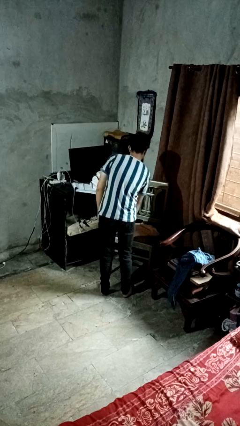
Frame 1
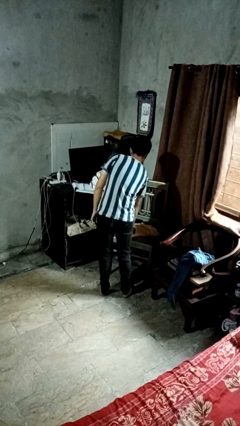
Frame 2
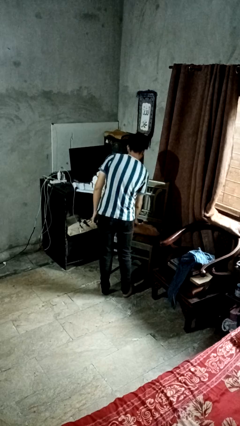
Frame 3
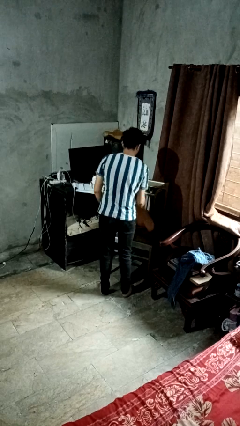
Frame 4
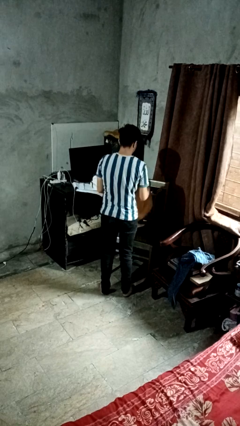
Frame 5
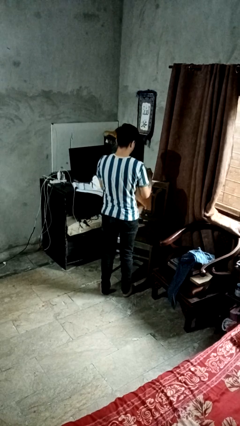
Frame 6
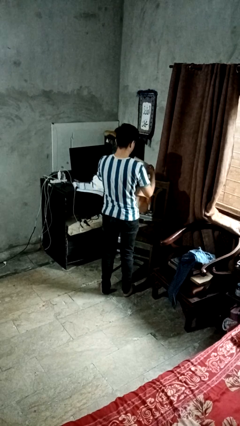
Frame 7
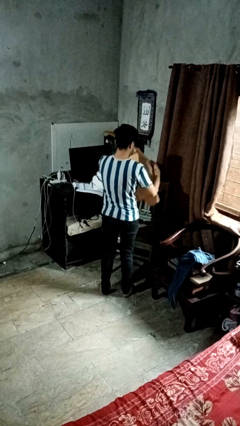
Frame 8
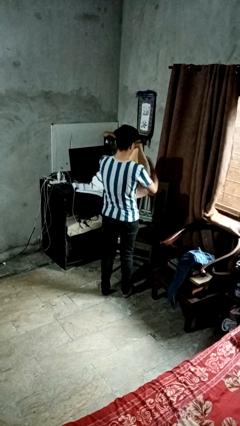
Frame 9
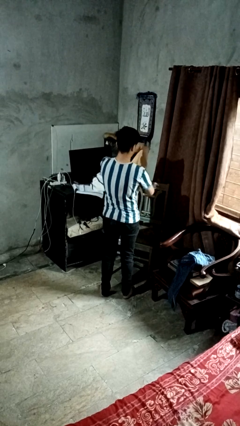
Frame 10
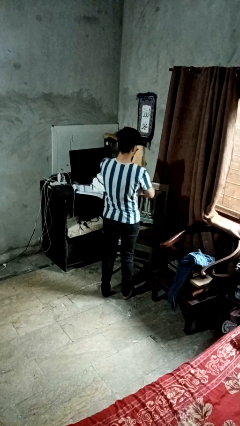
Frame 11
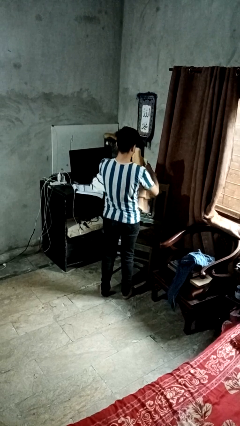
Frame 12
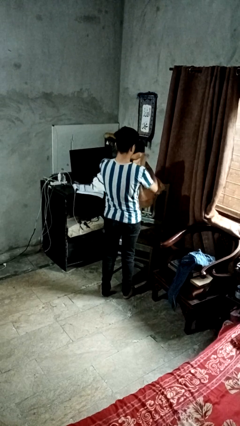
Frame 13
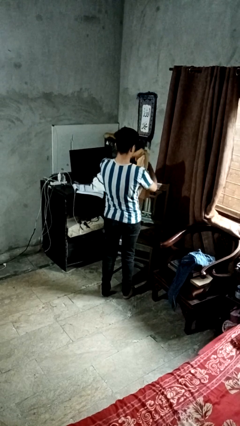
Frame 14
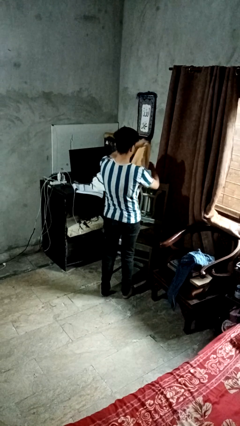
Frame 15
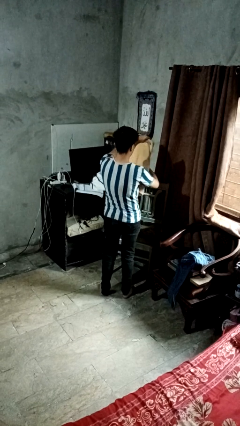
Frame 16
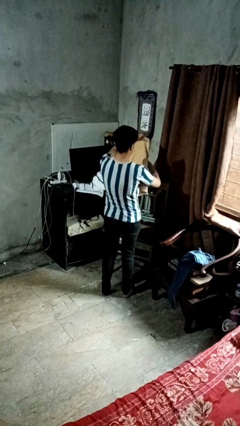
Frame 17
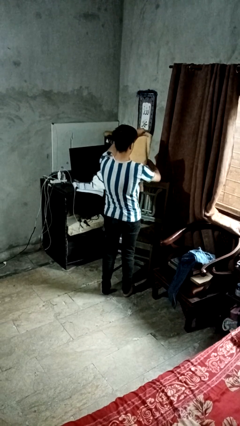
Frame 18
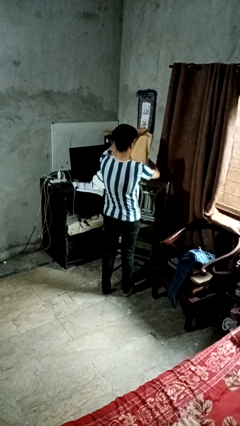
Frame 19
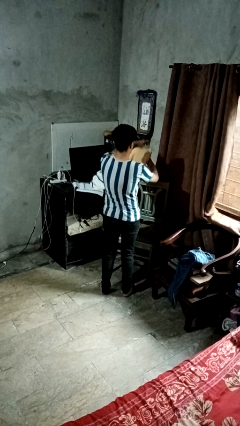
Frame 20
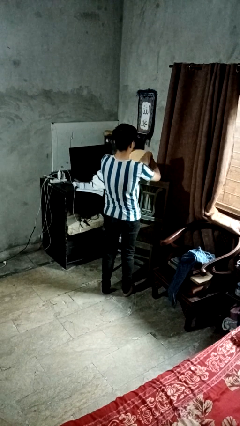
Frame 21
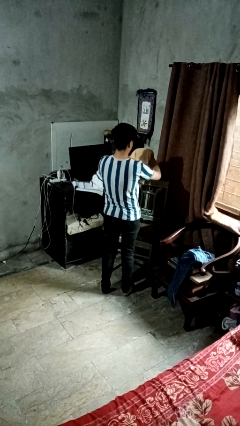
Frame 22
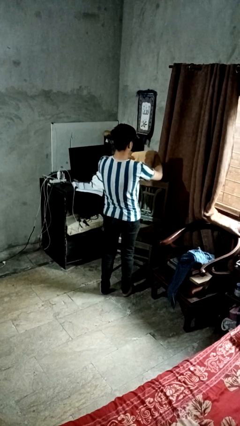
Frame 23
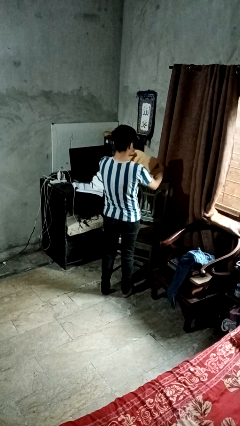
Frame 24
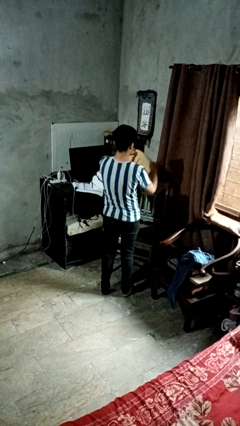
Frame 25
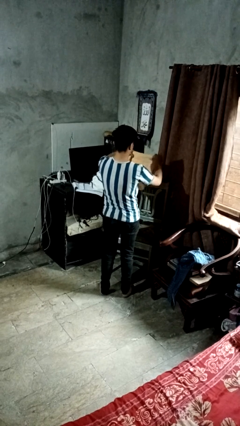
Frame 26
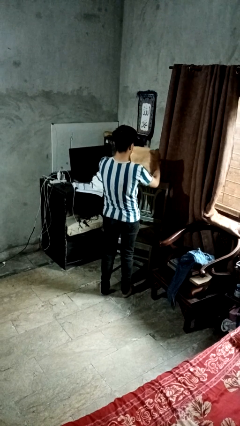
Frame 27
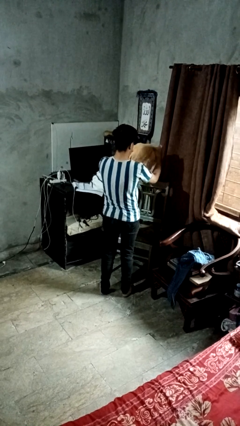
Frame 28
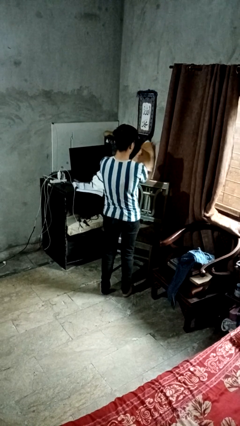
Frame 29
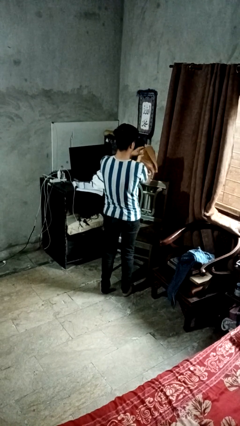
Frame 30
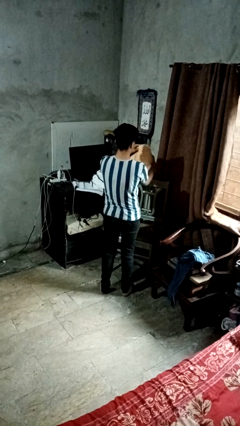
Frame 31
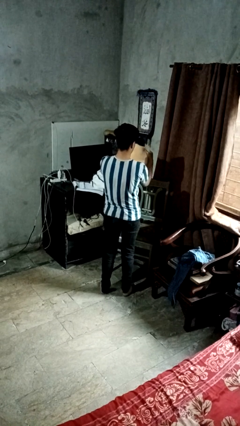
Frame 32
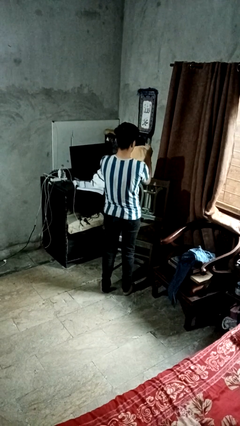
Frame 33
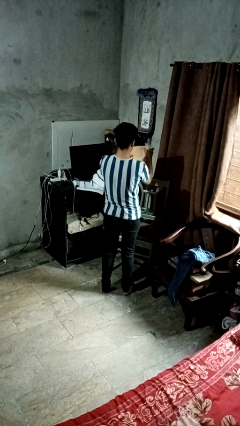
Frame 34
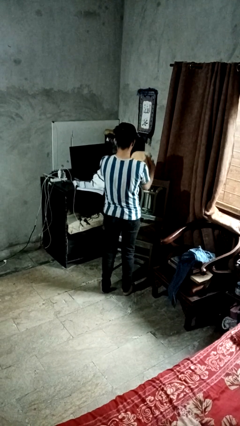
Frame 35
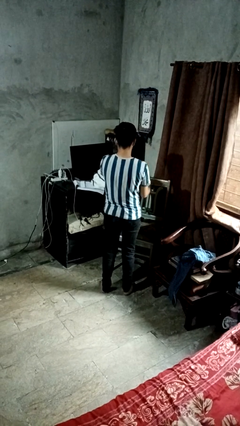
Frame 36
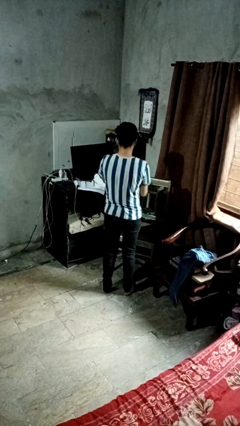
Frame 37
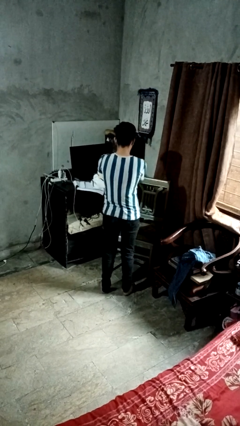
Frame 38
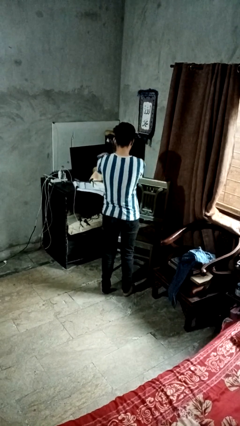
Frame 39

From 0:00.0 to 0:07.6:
person folds towel

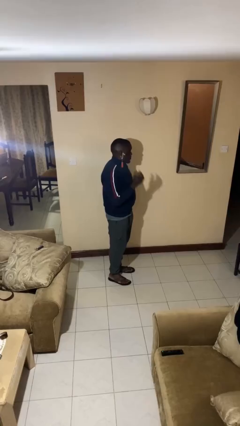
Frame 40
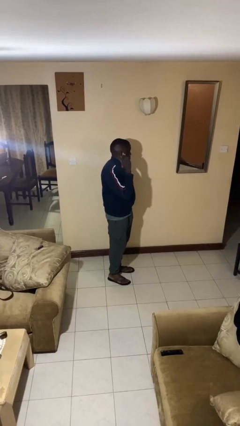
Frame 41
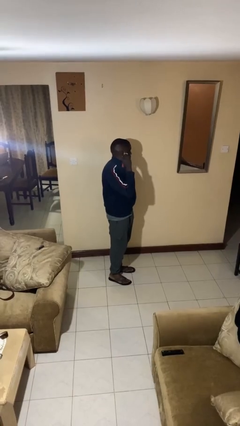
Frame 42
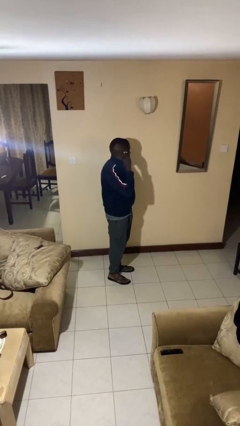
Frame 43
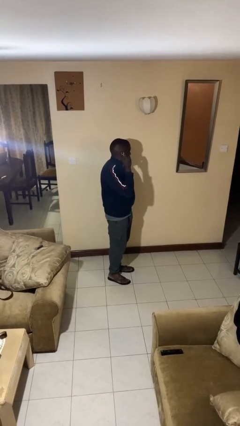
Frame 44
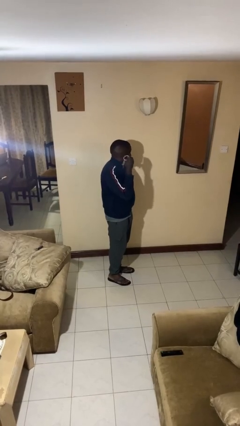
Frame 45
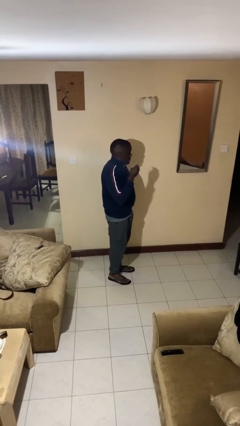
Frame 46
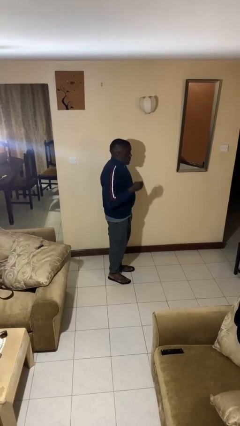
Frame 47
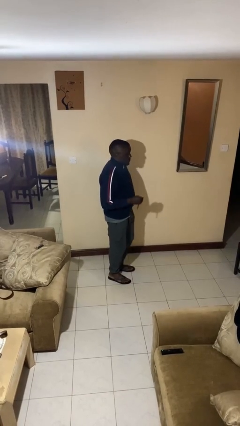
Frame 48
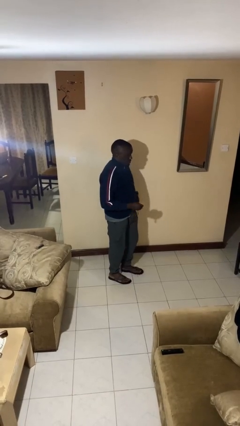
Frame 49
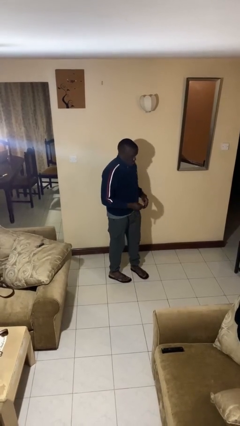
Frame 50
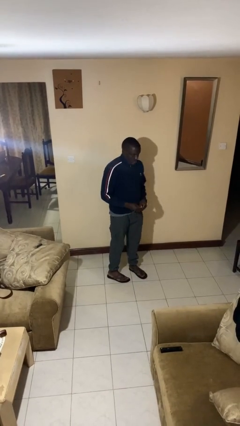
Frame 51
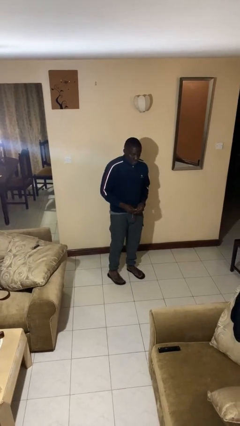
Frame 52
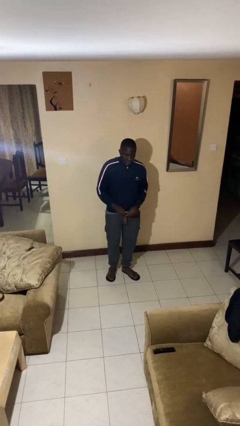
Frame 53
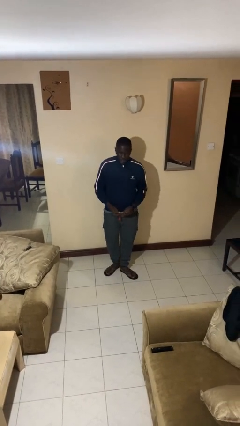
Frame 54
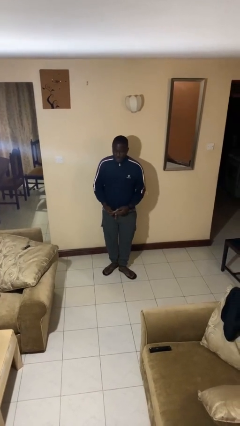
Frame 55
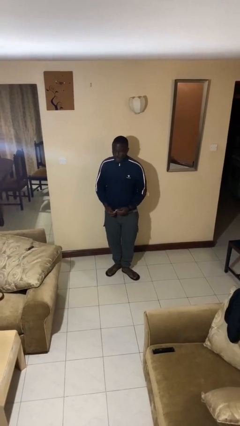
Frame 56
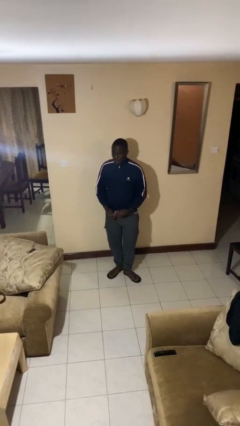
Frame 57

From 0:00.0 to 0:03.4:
person takes off earrings

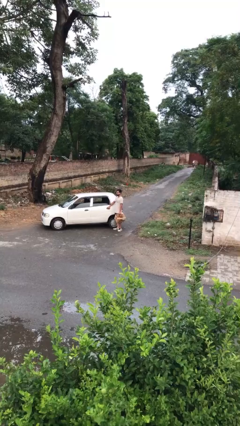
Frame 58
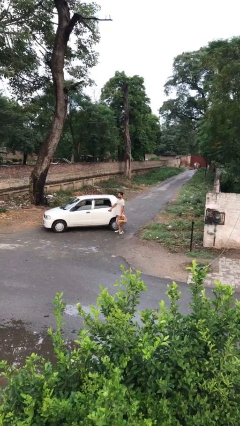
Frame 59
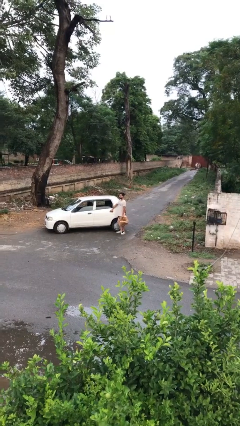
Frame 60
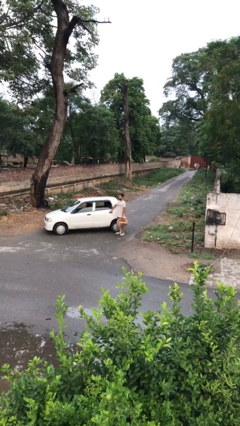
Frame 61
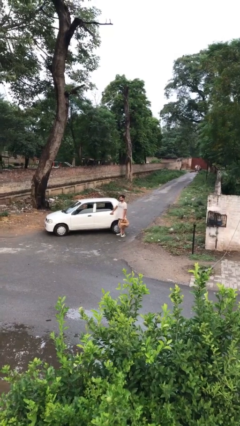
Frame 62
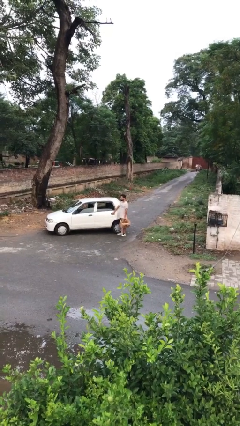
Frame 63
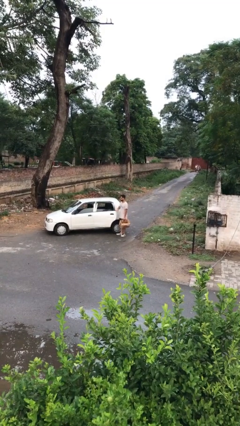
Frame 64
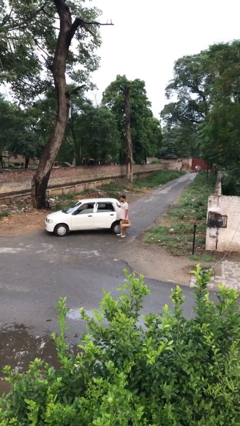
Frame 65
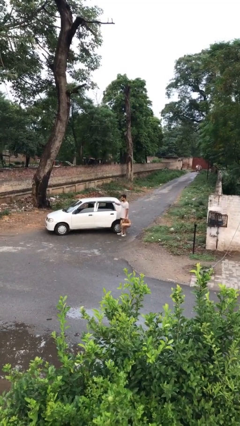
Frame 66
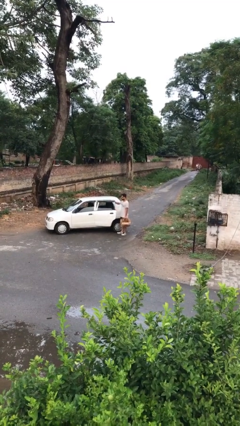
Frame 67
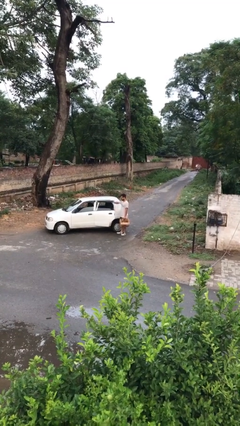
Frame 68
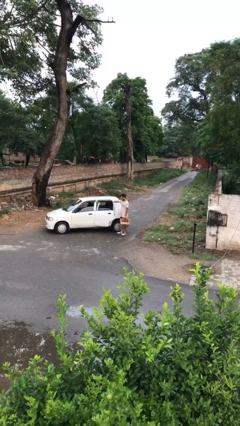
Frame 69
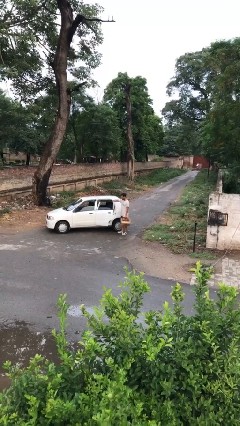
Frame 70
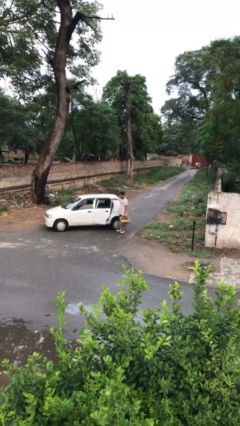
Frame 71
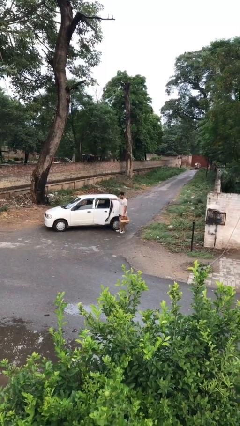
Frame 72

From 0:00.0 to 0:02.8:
person opens car door

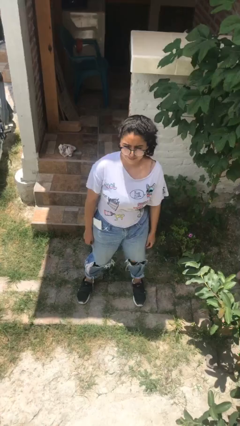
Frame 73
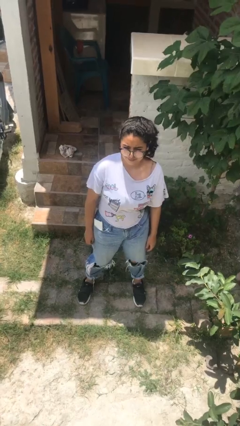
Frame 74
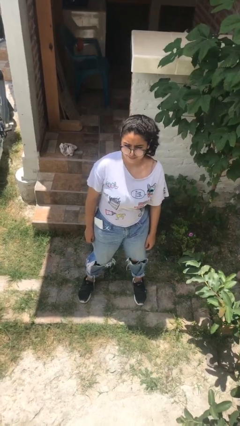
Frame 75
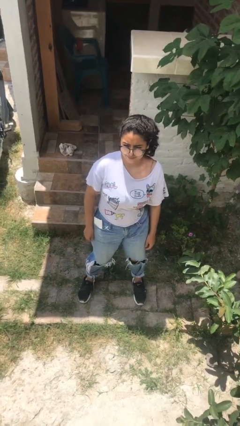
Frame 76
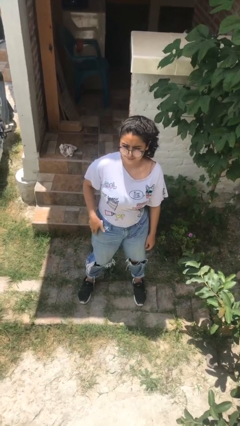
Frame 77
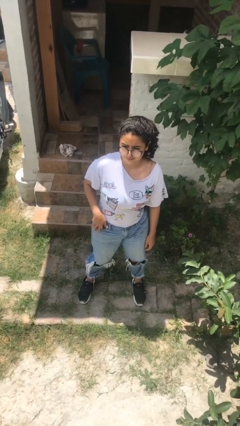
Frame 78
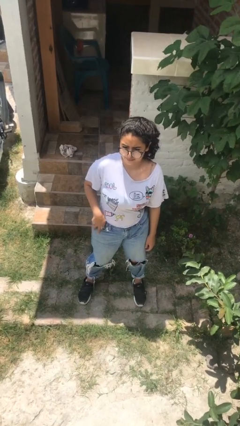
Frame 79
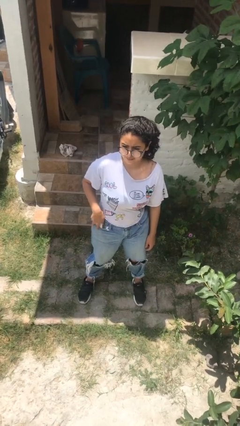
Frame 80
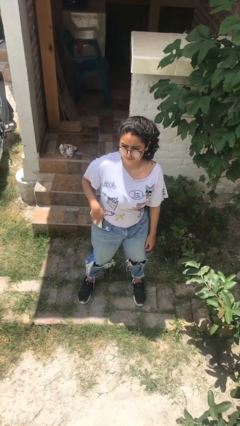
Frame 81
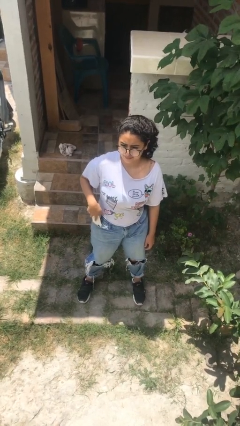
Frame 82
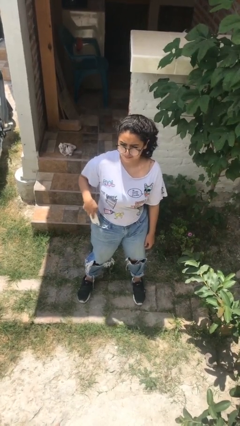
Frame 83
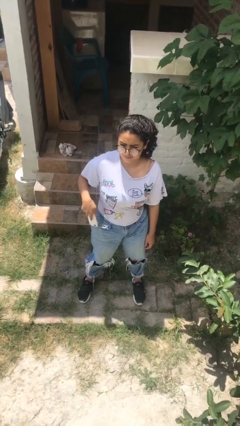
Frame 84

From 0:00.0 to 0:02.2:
person takes phone from pocket

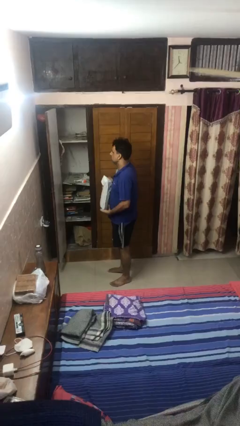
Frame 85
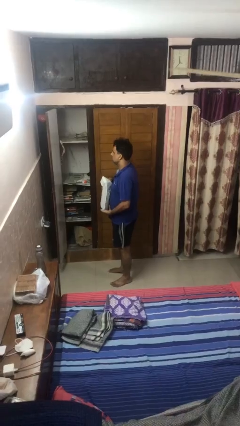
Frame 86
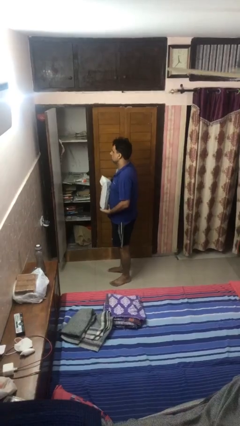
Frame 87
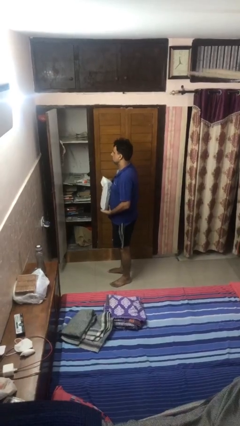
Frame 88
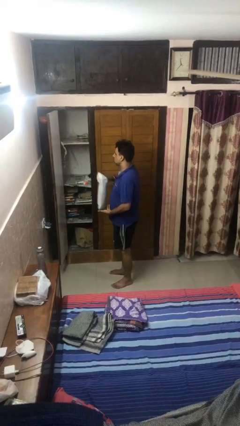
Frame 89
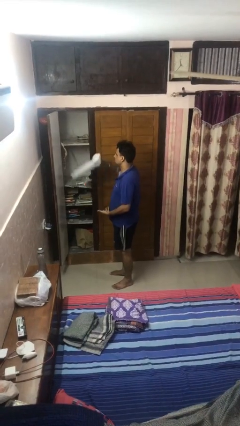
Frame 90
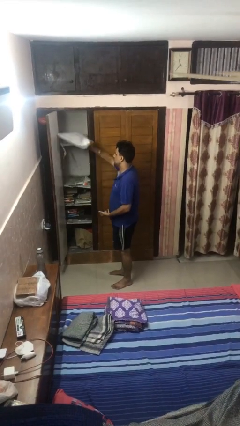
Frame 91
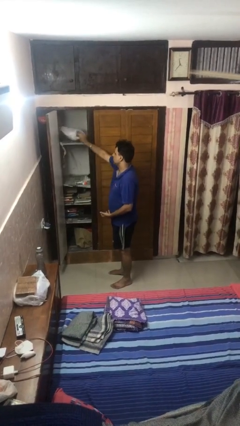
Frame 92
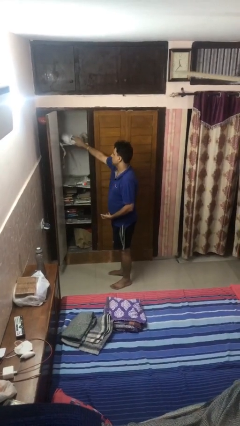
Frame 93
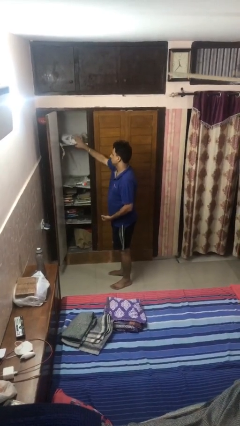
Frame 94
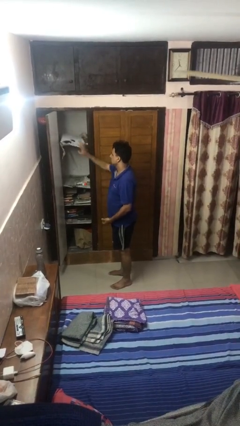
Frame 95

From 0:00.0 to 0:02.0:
person puts down object on shelf
